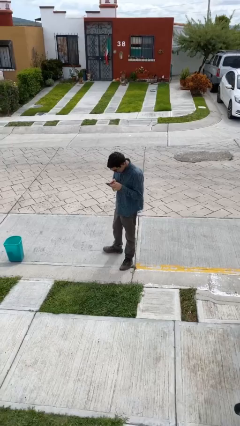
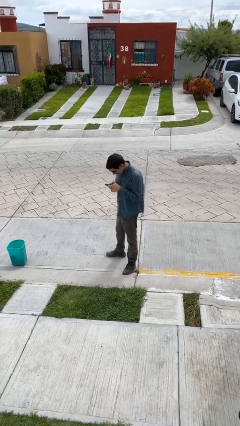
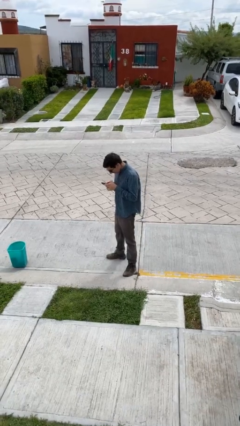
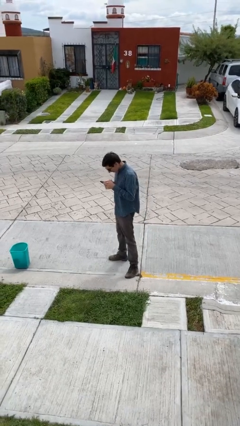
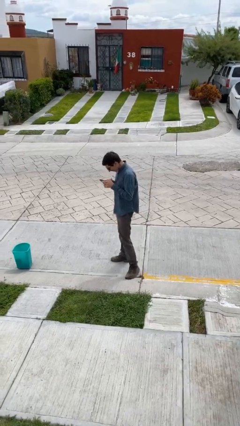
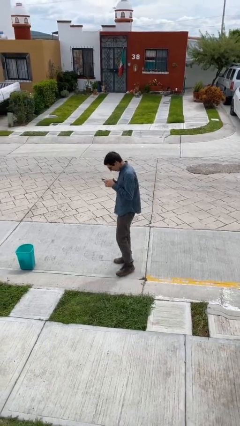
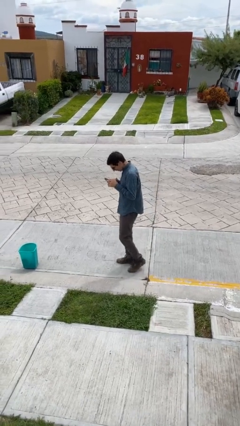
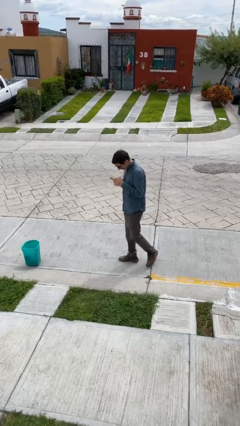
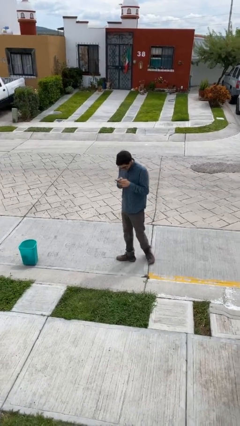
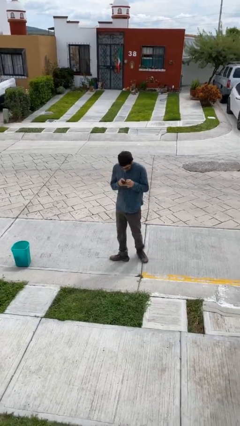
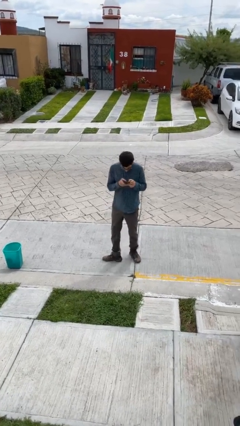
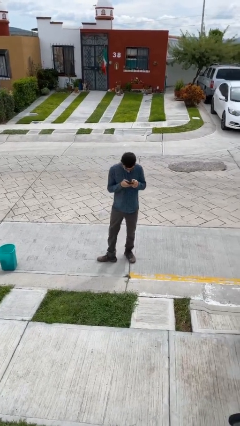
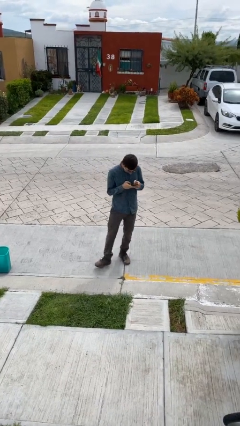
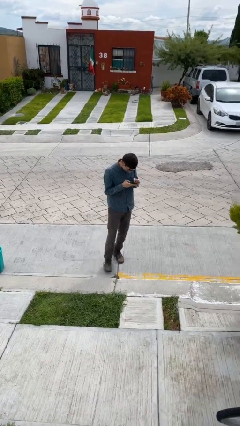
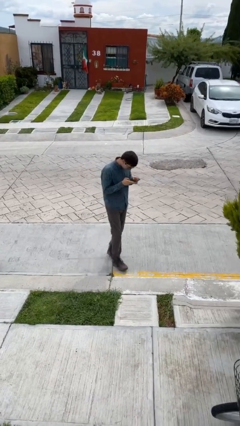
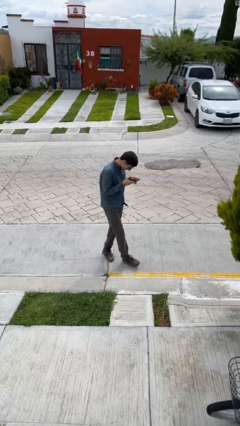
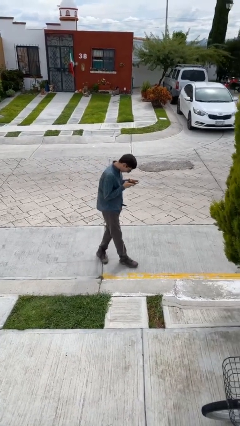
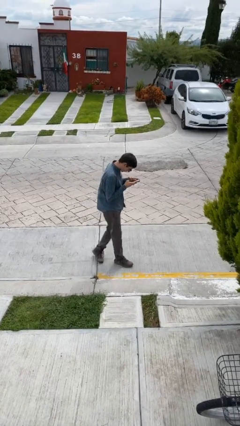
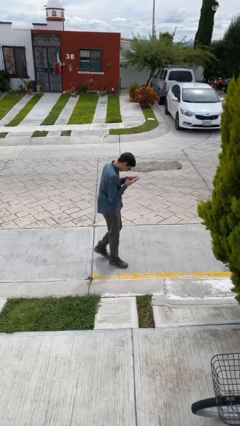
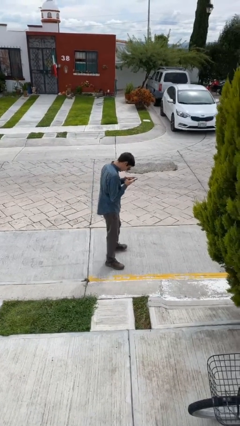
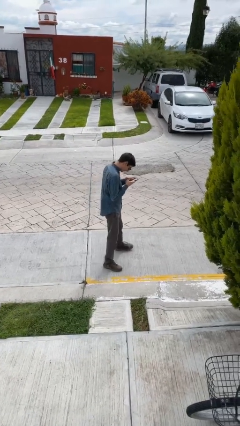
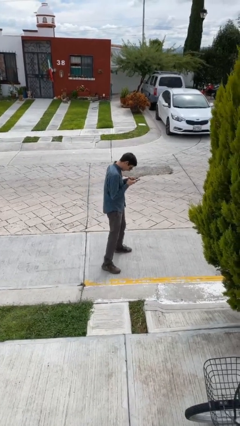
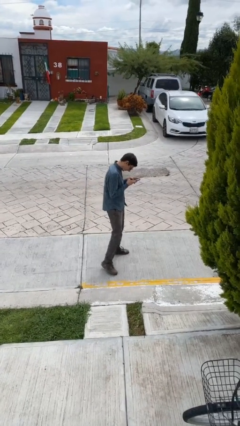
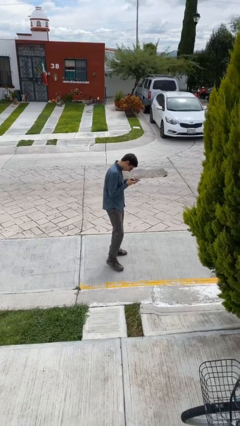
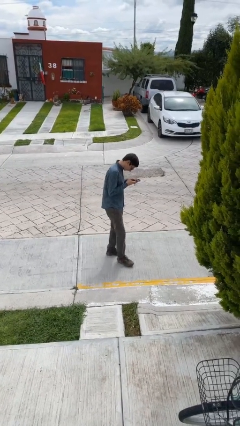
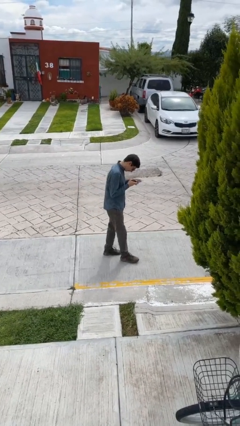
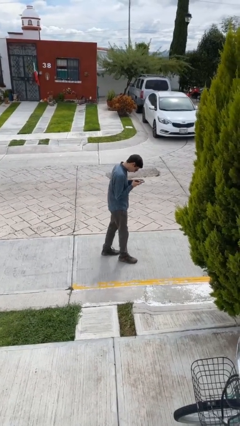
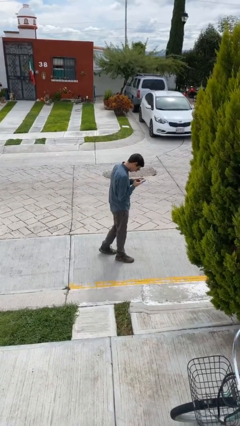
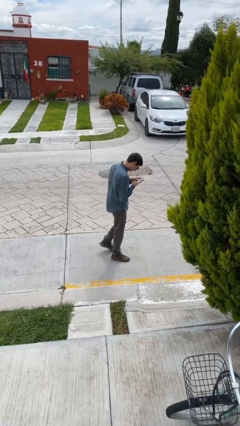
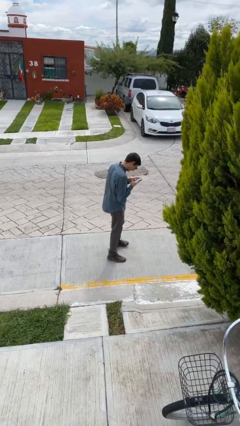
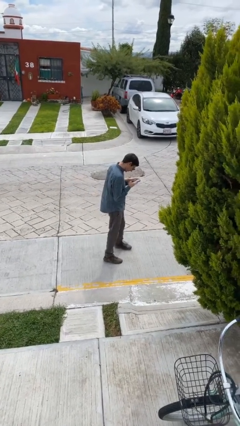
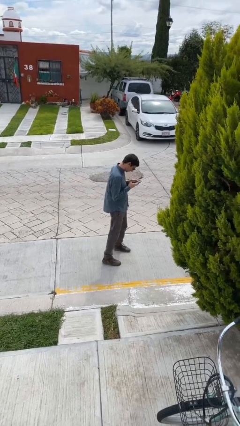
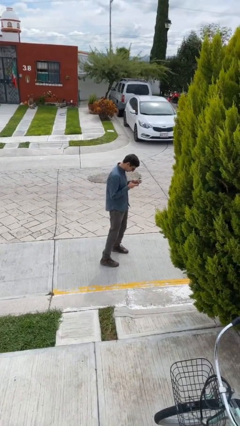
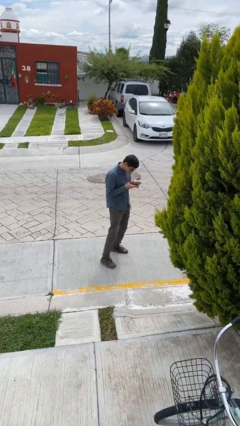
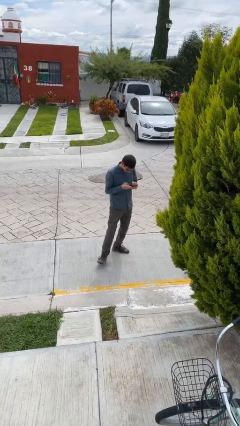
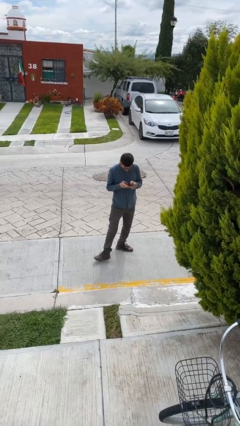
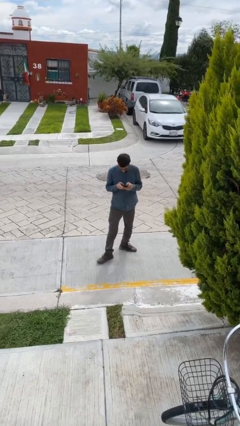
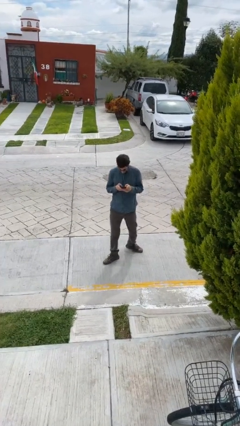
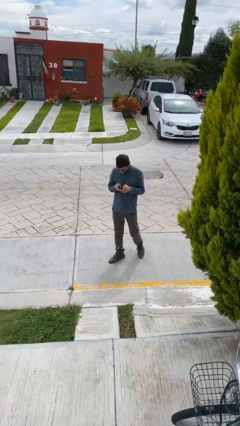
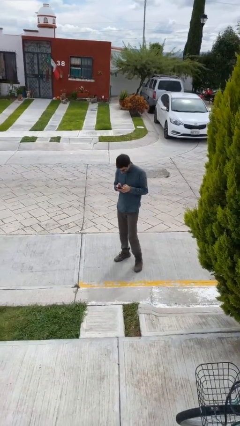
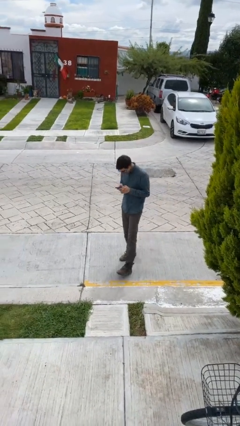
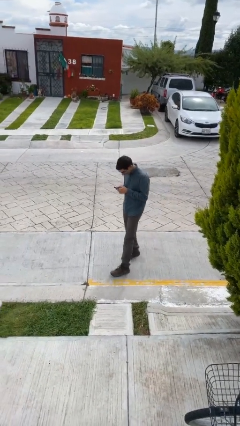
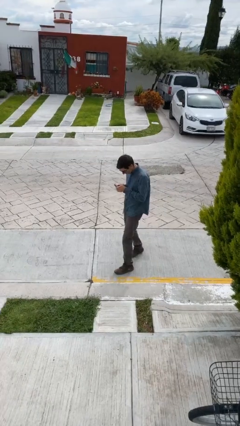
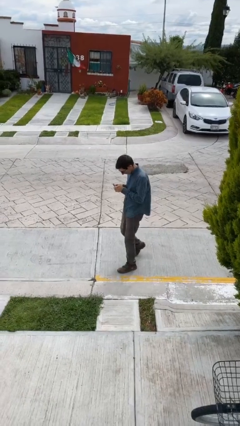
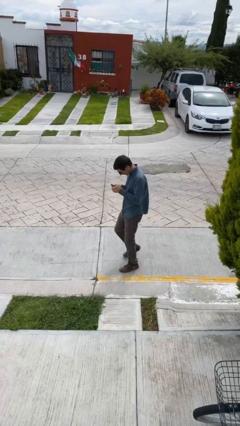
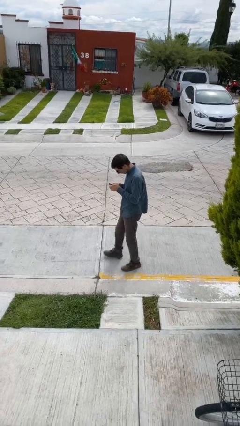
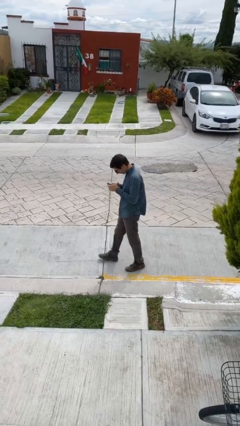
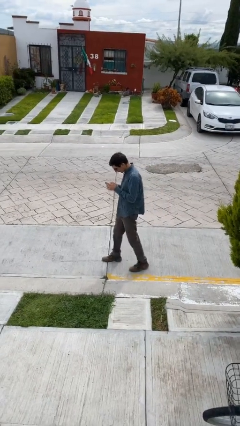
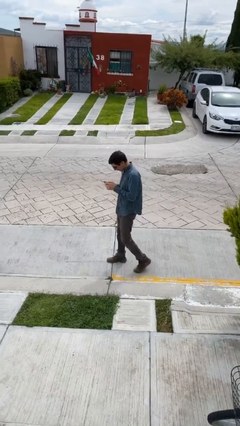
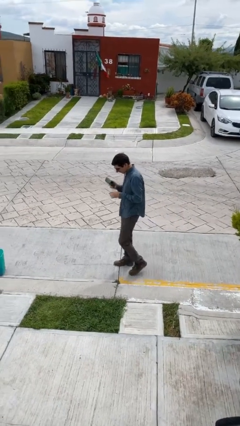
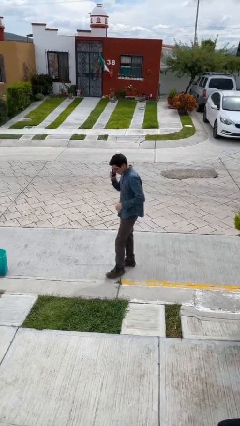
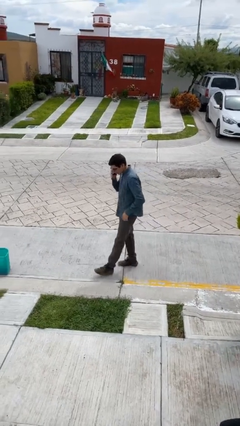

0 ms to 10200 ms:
person texts on phone

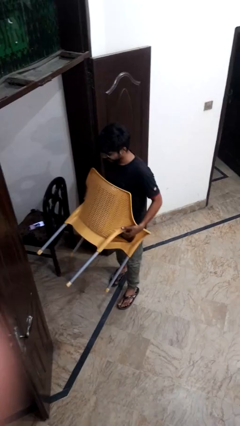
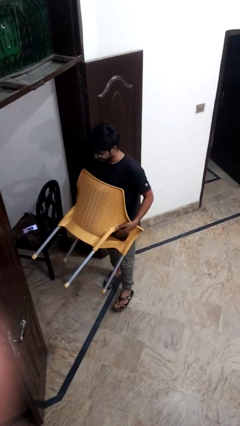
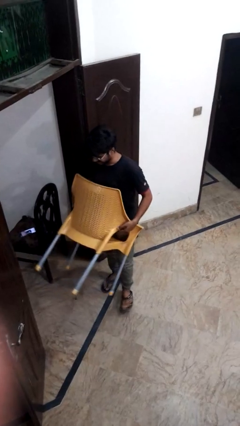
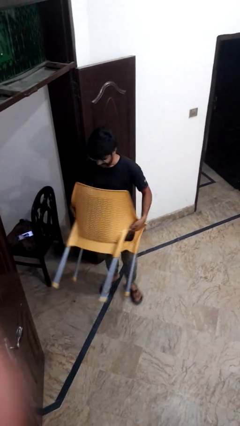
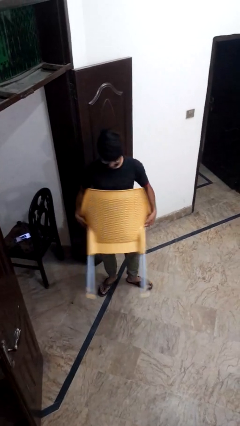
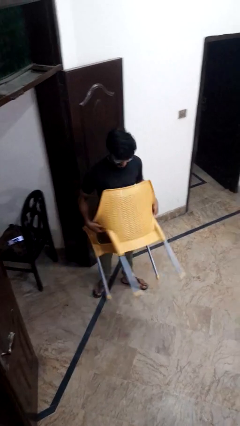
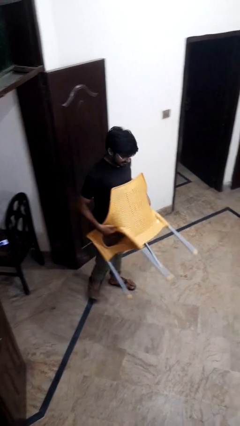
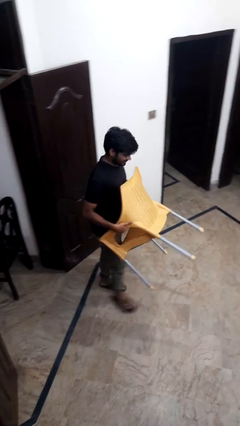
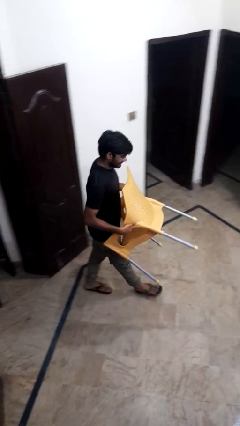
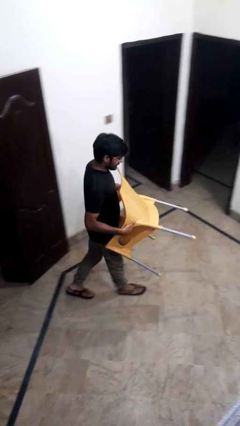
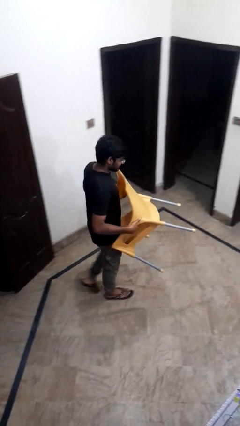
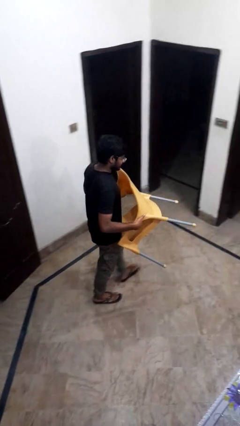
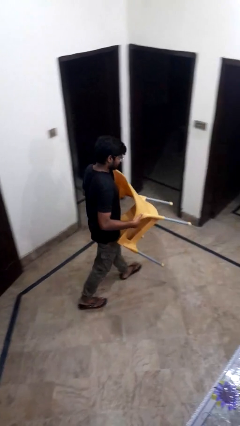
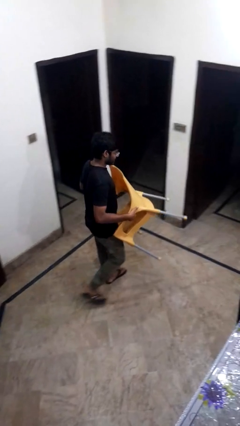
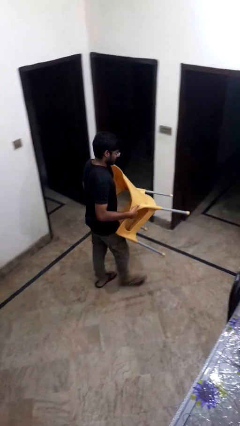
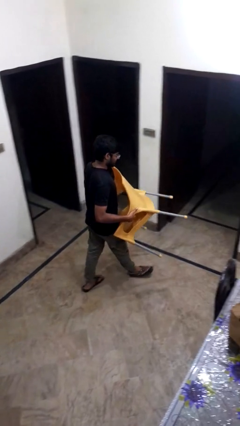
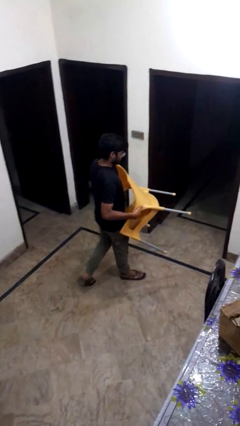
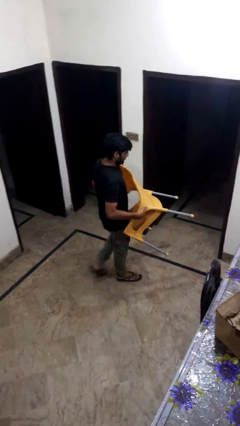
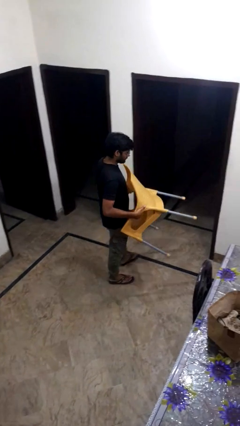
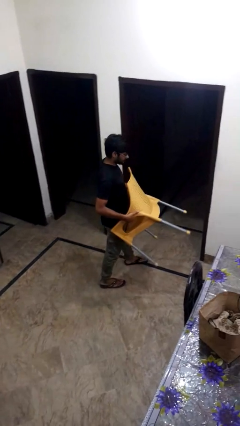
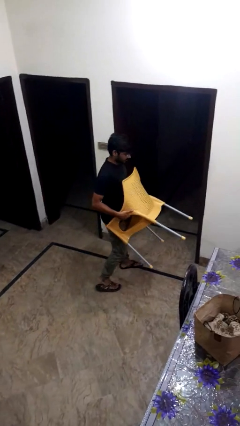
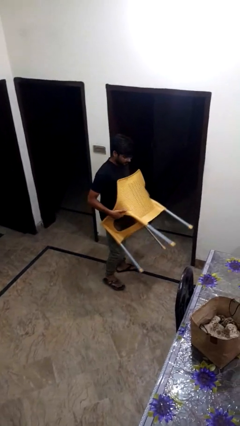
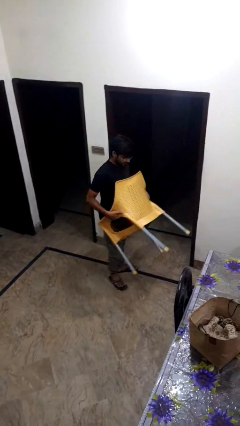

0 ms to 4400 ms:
person carries furniture

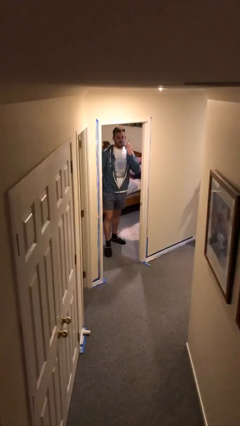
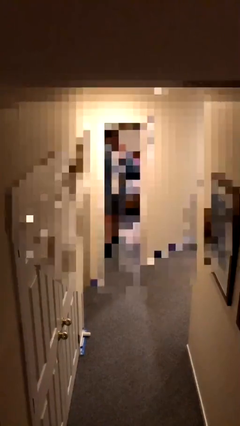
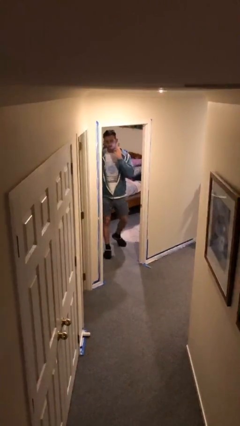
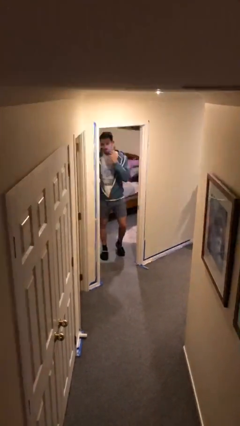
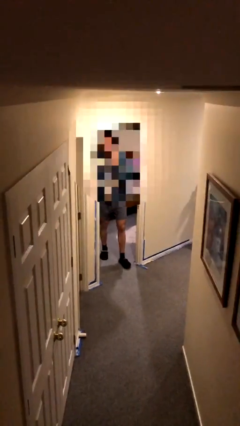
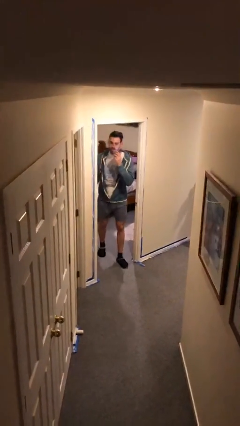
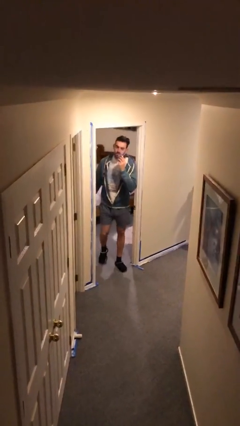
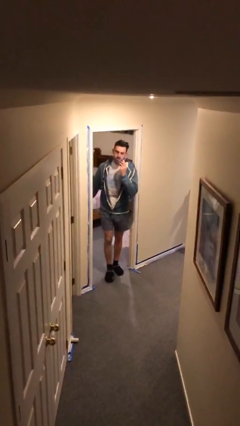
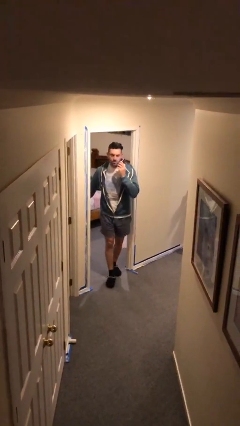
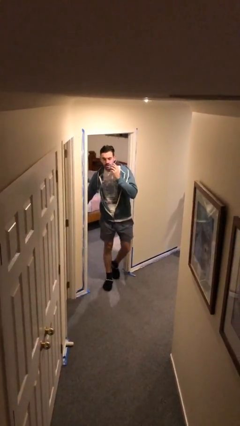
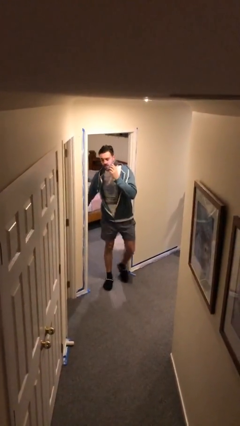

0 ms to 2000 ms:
person enters scene through structure

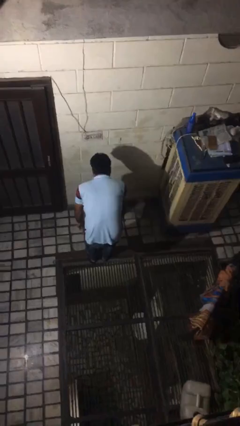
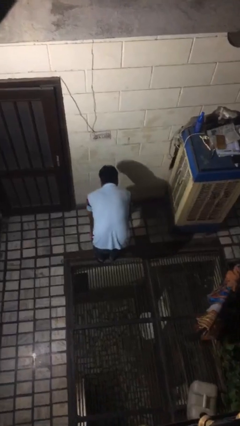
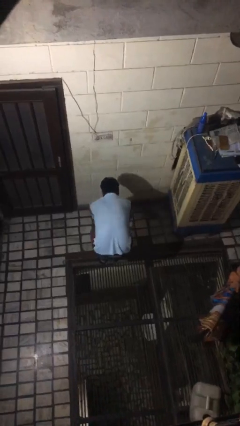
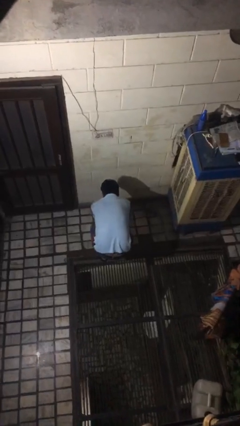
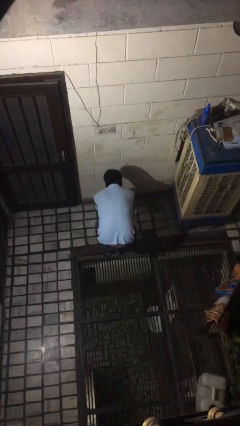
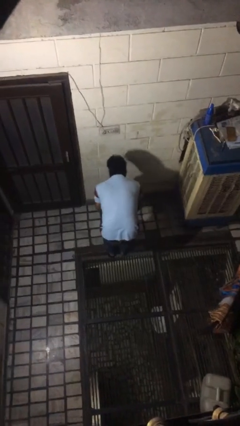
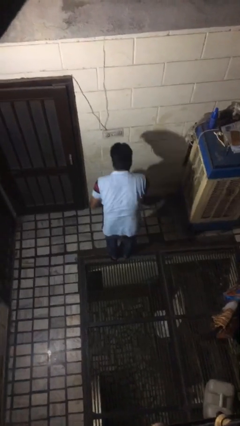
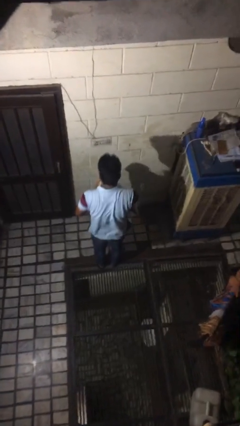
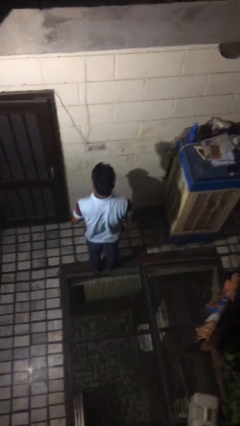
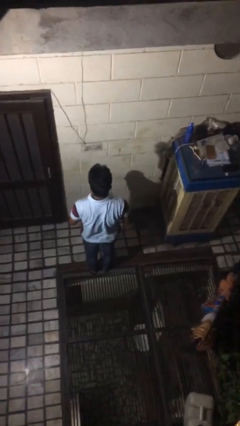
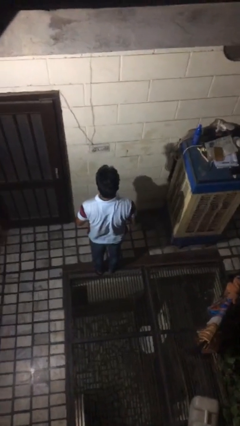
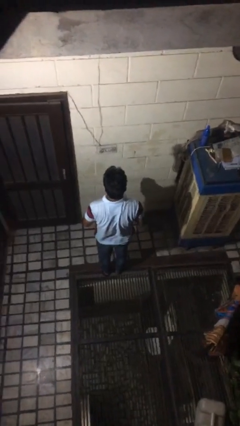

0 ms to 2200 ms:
person picks up object from floor
